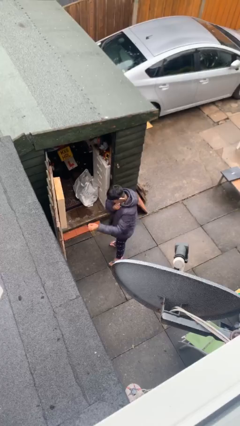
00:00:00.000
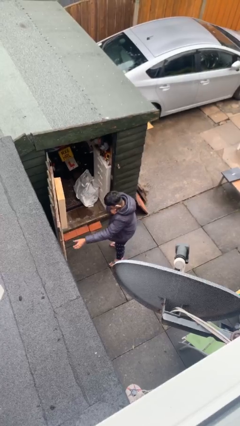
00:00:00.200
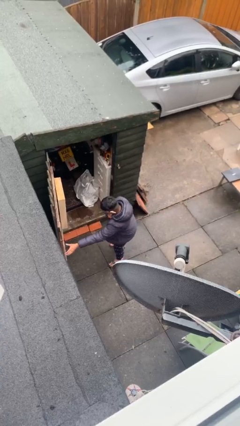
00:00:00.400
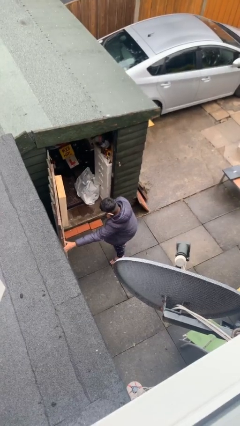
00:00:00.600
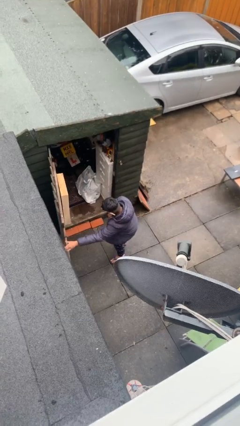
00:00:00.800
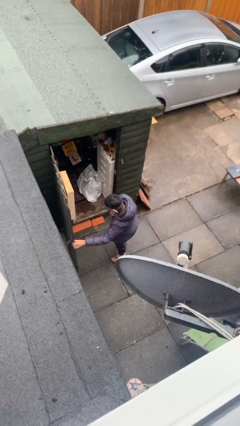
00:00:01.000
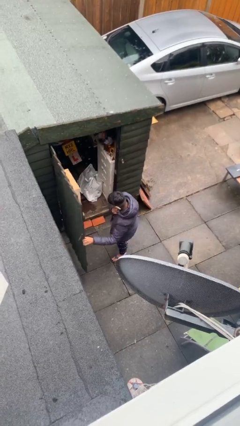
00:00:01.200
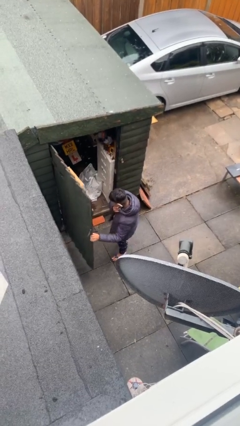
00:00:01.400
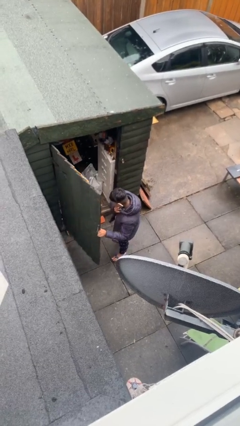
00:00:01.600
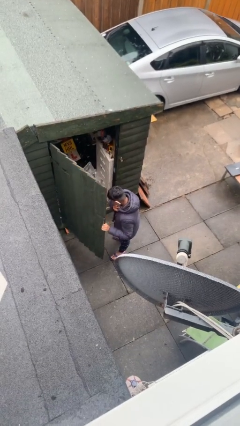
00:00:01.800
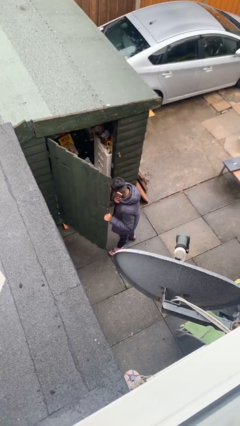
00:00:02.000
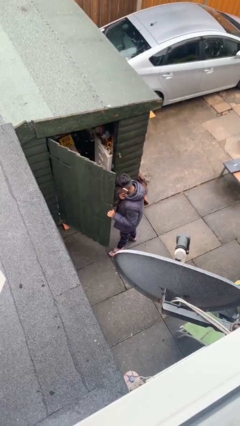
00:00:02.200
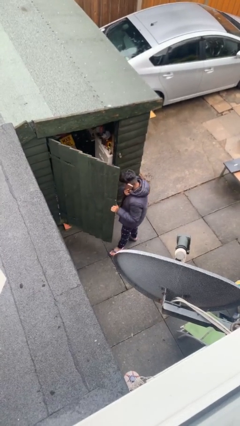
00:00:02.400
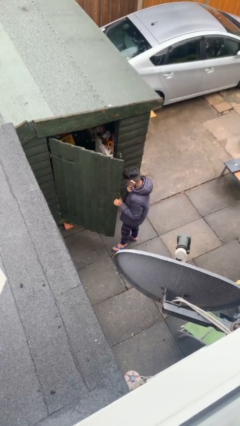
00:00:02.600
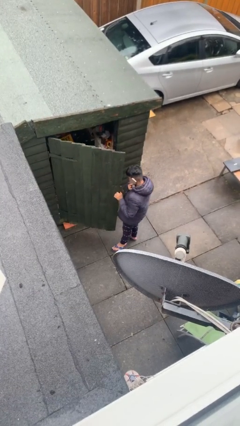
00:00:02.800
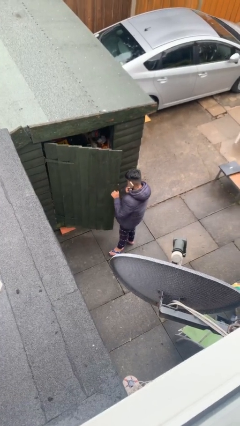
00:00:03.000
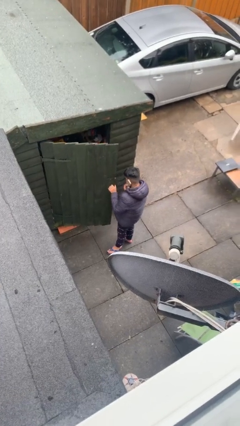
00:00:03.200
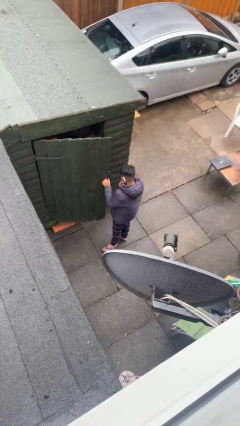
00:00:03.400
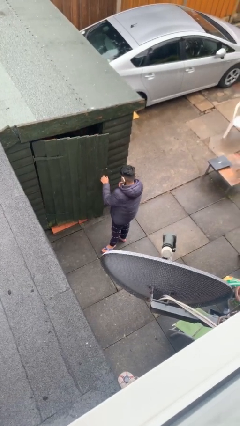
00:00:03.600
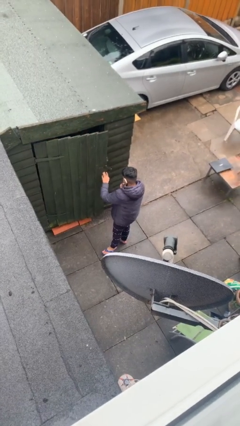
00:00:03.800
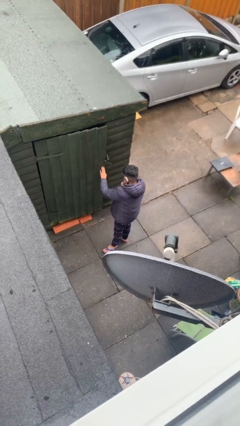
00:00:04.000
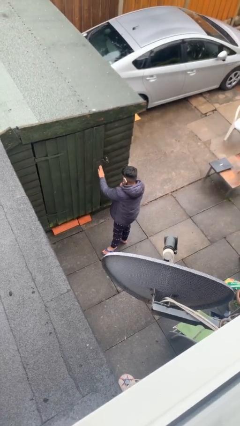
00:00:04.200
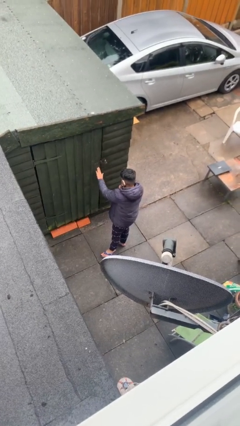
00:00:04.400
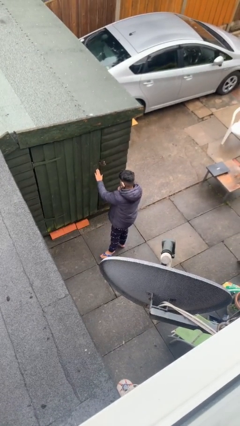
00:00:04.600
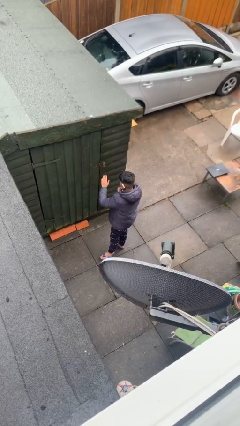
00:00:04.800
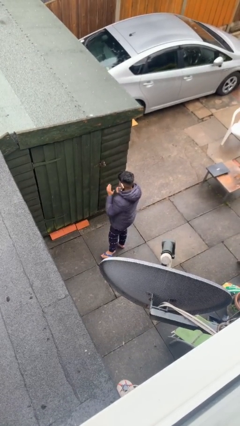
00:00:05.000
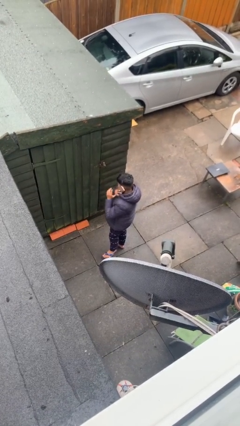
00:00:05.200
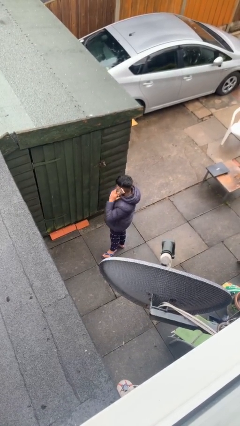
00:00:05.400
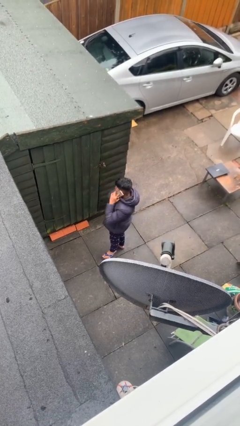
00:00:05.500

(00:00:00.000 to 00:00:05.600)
person closes facility door

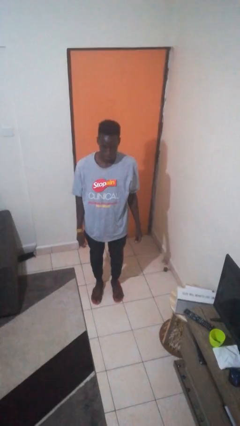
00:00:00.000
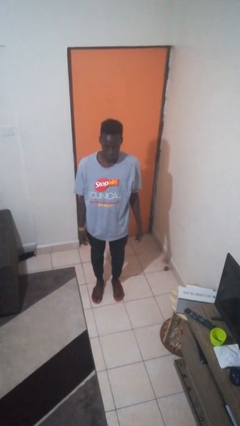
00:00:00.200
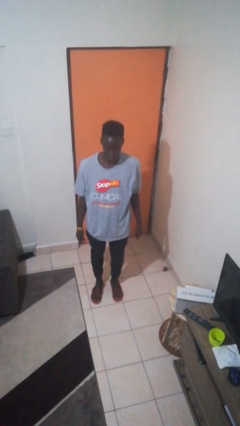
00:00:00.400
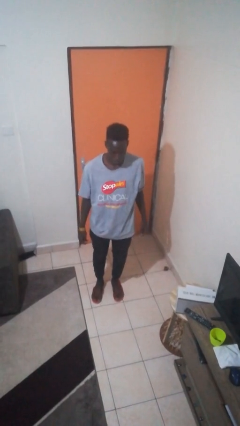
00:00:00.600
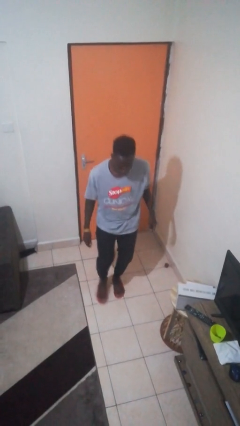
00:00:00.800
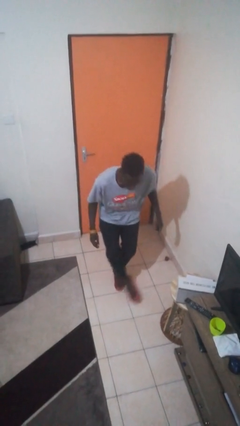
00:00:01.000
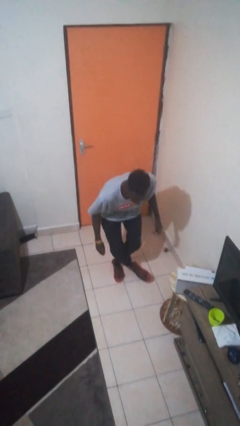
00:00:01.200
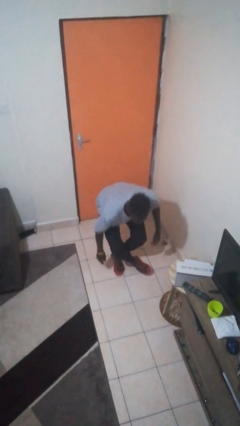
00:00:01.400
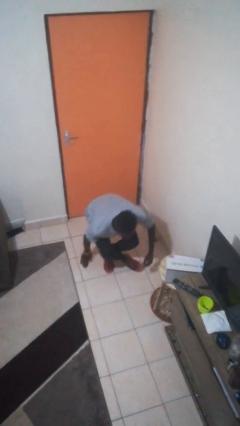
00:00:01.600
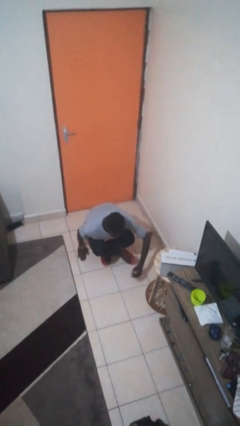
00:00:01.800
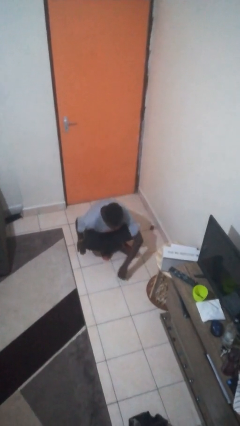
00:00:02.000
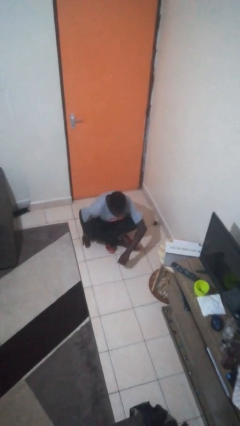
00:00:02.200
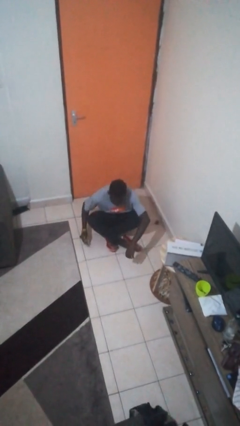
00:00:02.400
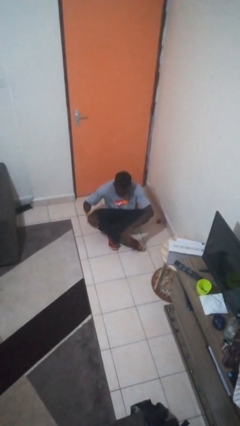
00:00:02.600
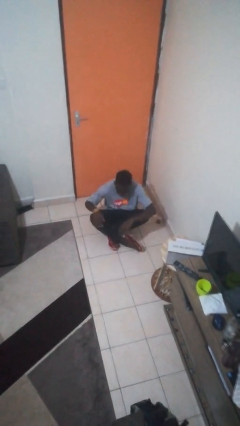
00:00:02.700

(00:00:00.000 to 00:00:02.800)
person sits crisscross

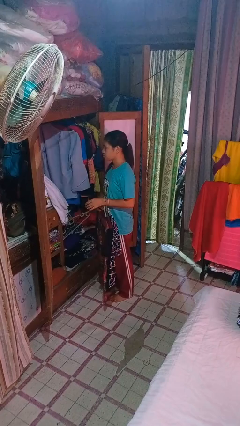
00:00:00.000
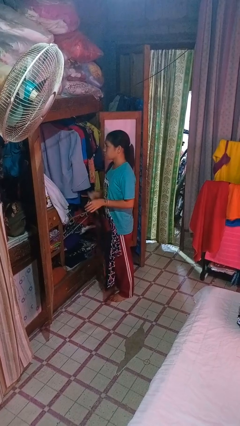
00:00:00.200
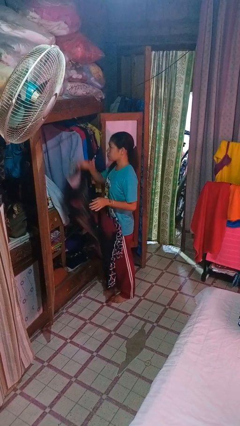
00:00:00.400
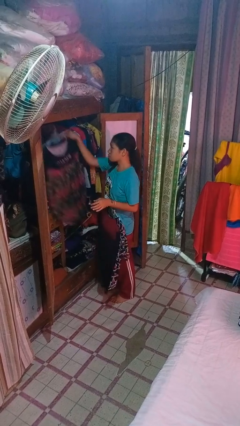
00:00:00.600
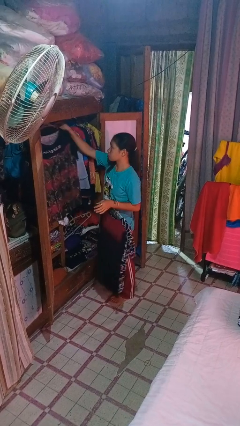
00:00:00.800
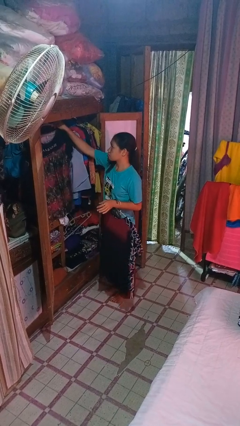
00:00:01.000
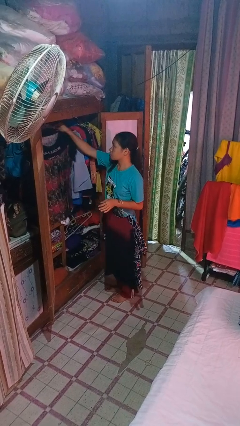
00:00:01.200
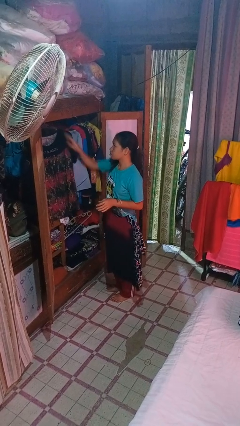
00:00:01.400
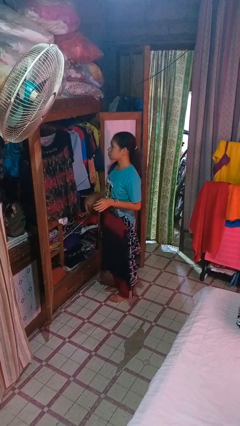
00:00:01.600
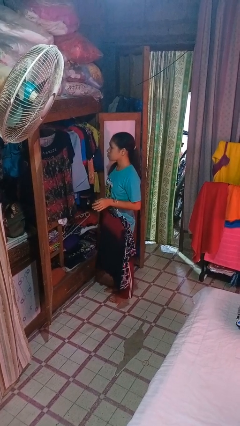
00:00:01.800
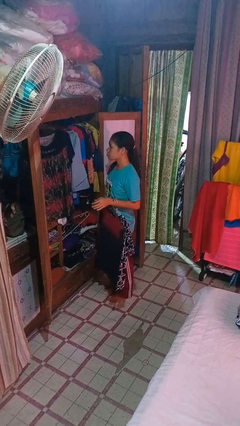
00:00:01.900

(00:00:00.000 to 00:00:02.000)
person puts clothes into closet

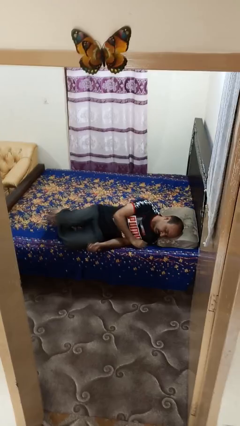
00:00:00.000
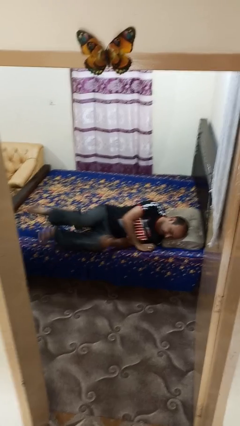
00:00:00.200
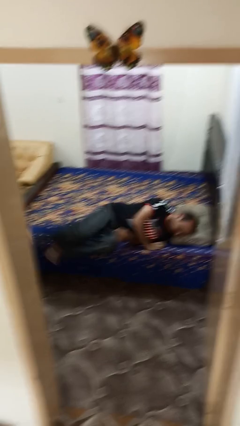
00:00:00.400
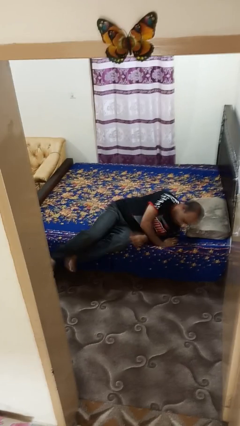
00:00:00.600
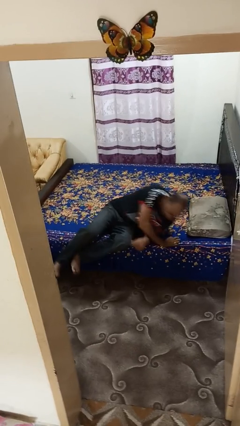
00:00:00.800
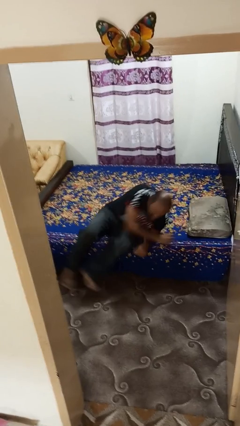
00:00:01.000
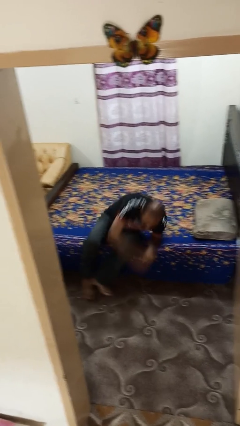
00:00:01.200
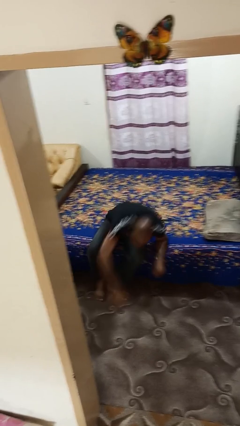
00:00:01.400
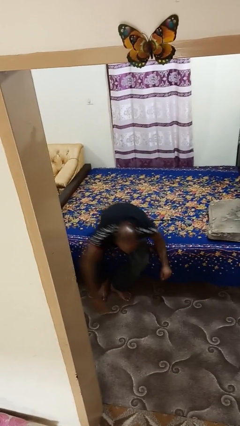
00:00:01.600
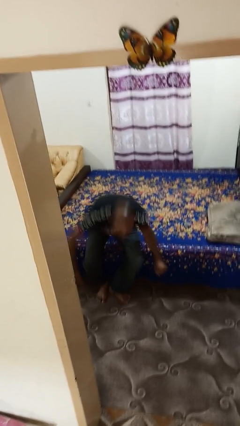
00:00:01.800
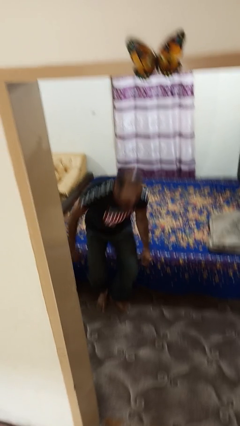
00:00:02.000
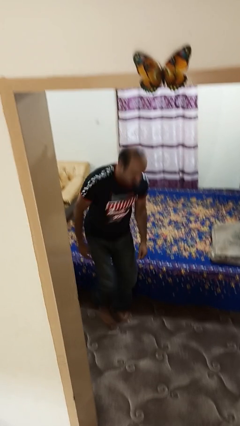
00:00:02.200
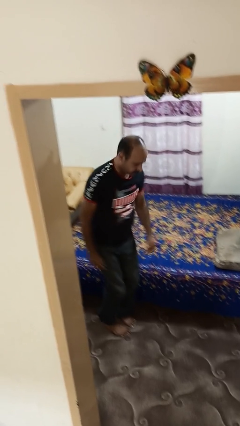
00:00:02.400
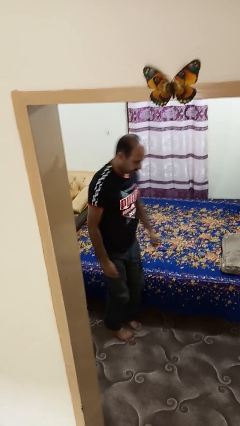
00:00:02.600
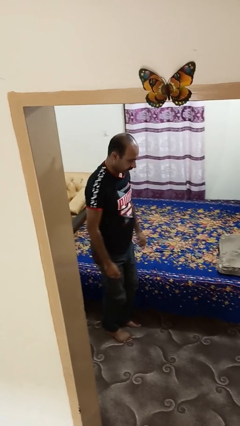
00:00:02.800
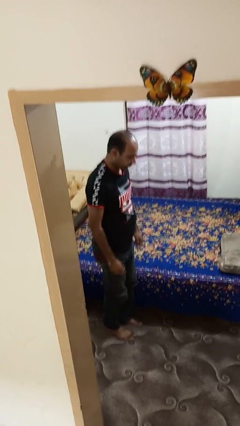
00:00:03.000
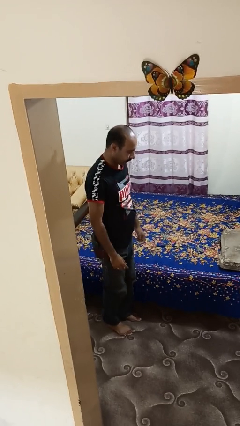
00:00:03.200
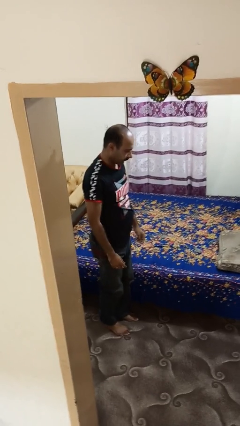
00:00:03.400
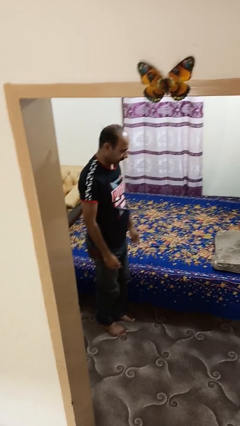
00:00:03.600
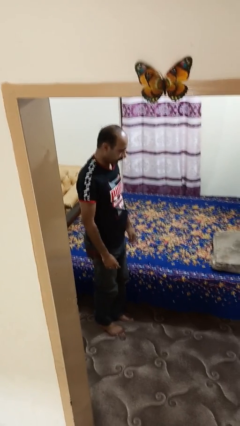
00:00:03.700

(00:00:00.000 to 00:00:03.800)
person stands up

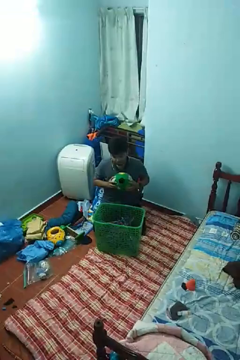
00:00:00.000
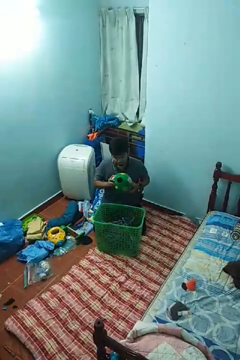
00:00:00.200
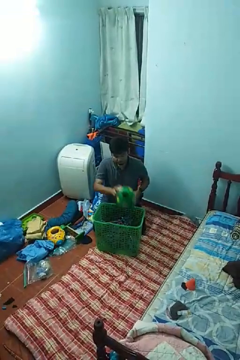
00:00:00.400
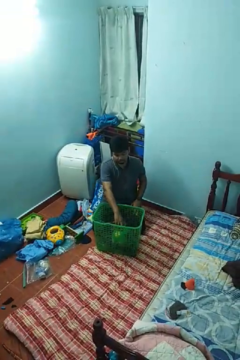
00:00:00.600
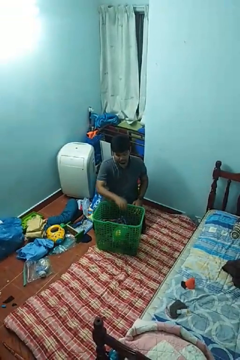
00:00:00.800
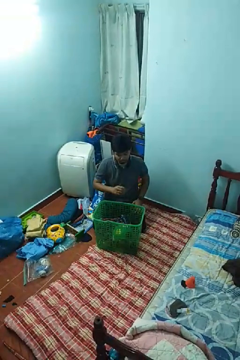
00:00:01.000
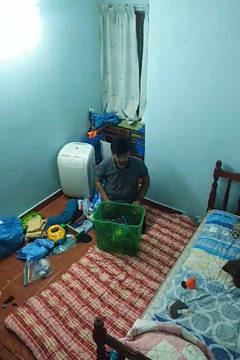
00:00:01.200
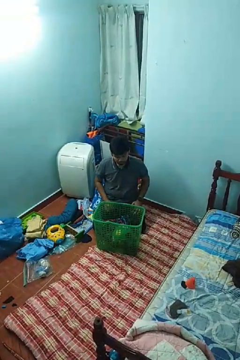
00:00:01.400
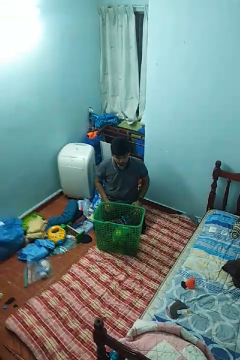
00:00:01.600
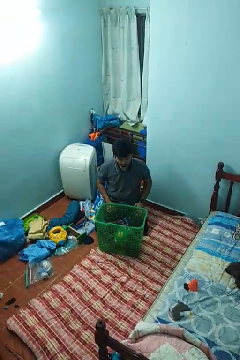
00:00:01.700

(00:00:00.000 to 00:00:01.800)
person puts object into basket

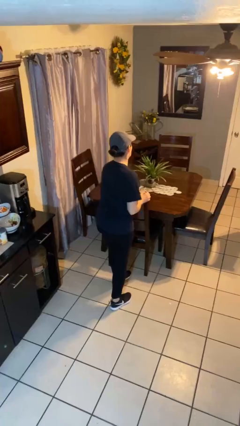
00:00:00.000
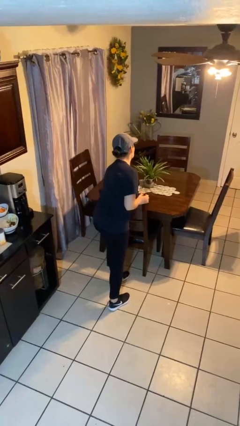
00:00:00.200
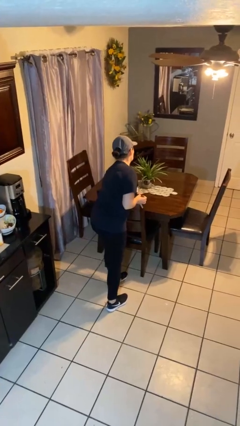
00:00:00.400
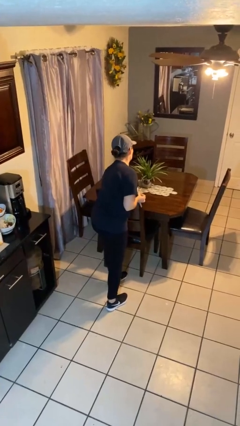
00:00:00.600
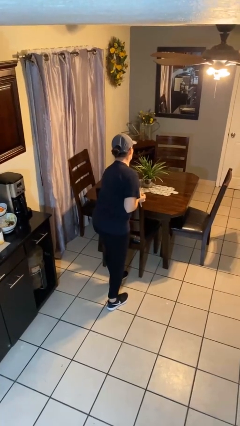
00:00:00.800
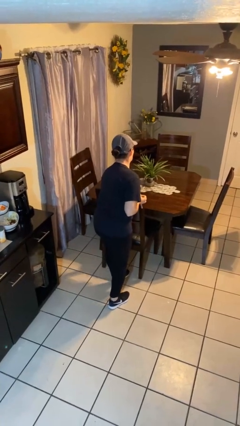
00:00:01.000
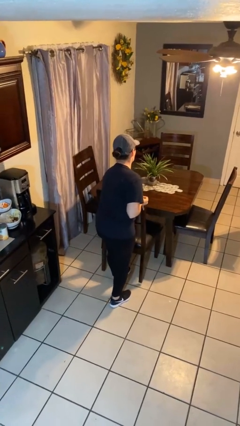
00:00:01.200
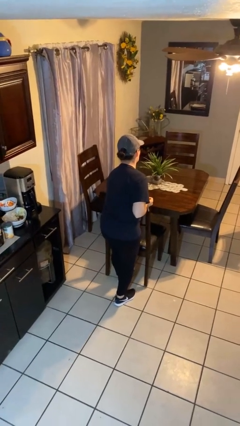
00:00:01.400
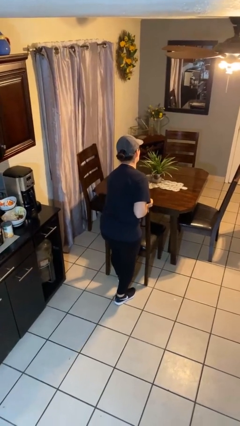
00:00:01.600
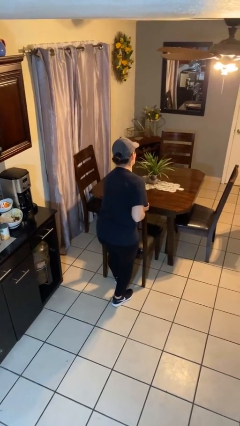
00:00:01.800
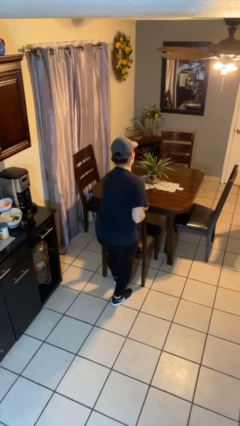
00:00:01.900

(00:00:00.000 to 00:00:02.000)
person pulls out chair
